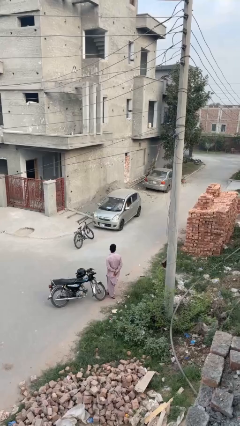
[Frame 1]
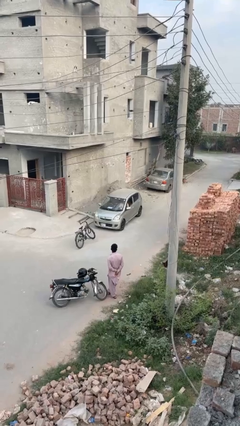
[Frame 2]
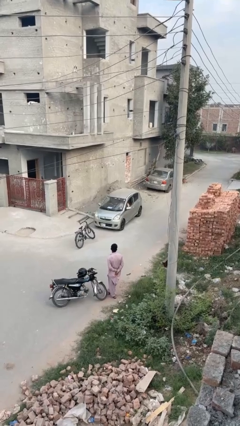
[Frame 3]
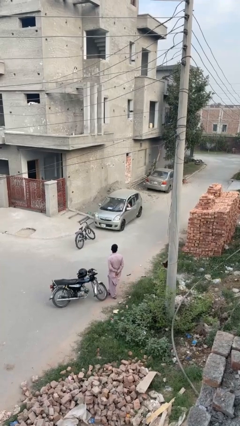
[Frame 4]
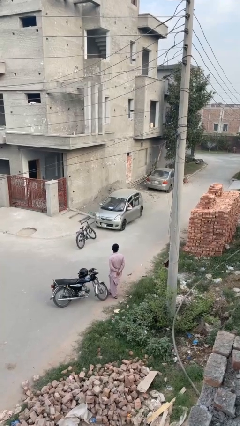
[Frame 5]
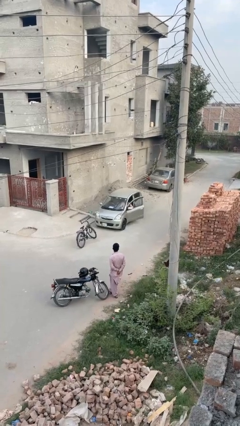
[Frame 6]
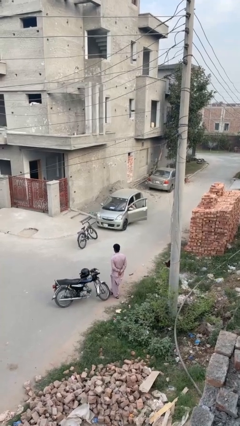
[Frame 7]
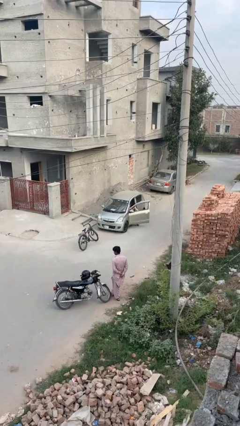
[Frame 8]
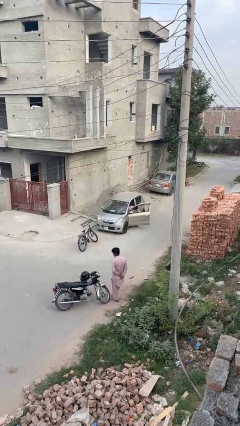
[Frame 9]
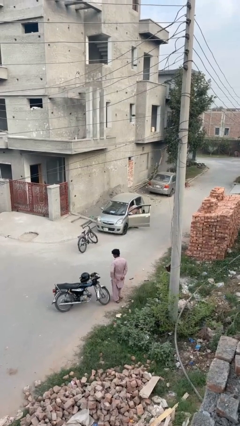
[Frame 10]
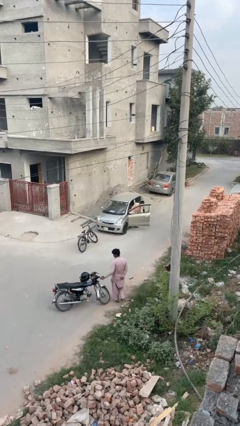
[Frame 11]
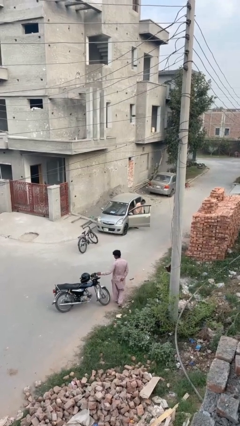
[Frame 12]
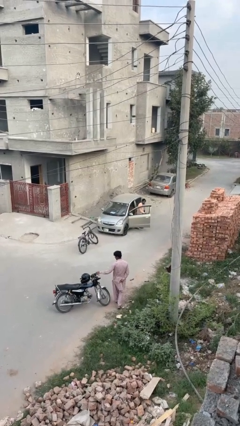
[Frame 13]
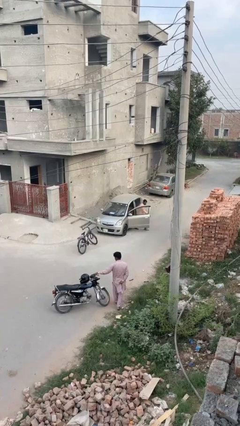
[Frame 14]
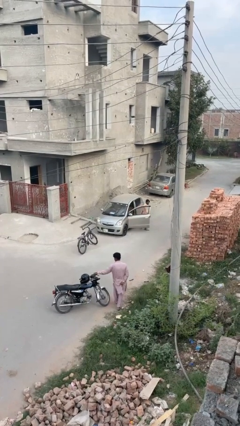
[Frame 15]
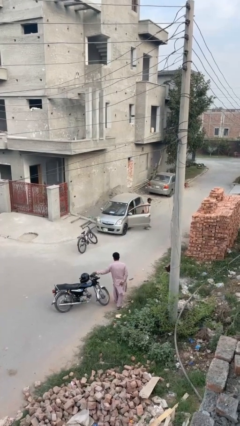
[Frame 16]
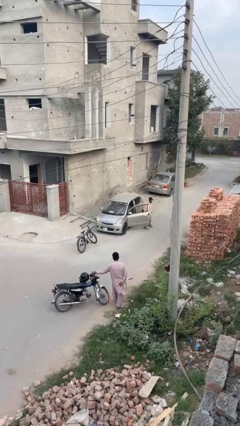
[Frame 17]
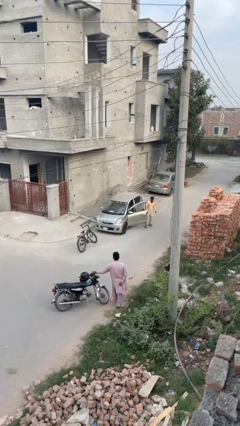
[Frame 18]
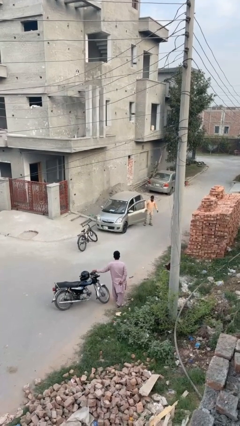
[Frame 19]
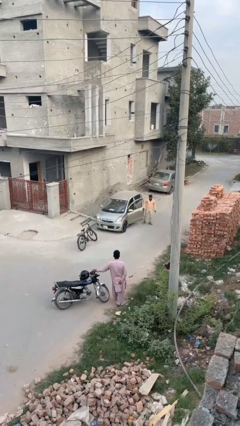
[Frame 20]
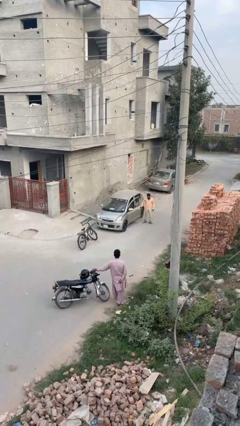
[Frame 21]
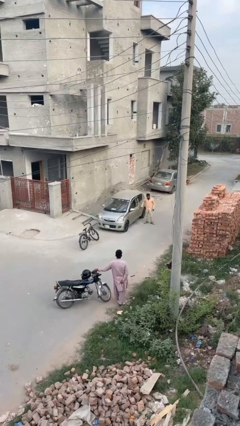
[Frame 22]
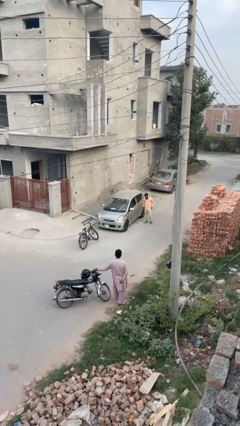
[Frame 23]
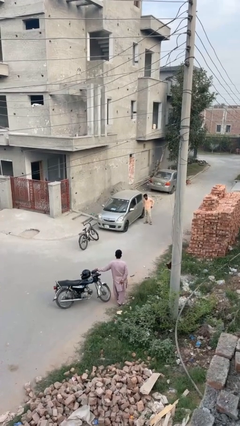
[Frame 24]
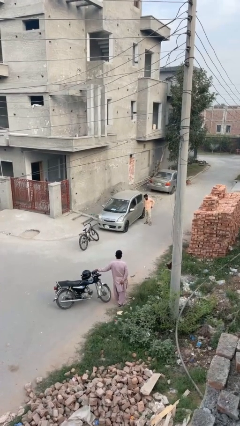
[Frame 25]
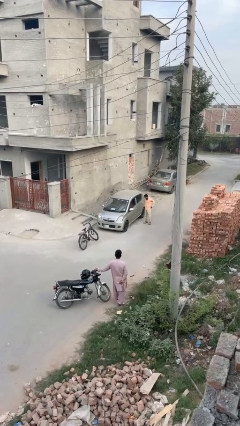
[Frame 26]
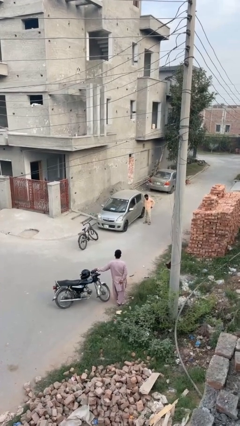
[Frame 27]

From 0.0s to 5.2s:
car drops off person

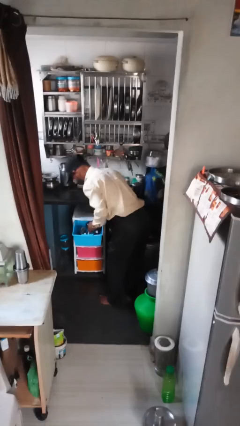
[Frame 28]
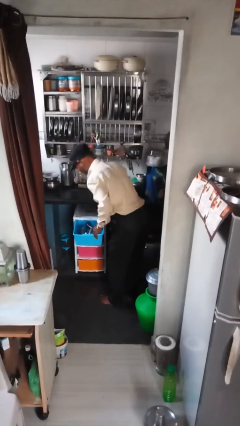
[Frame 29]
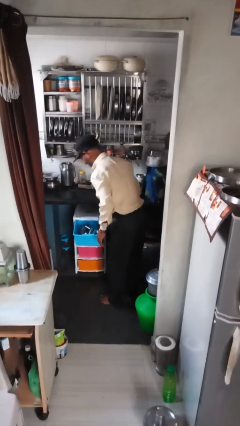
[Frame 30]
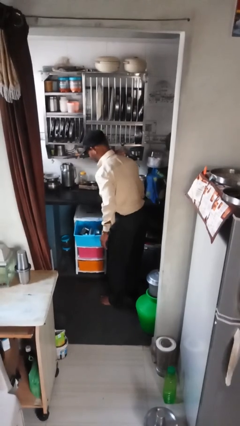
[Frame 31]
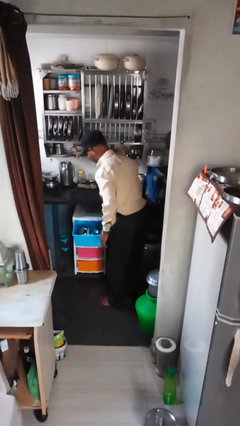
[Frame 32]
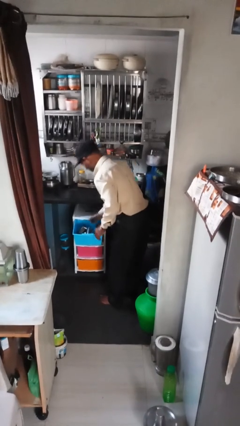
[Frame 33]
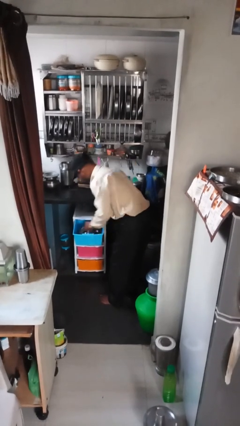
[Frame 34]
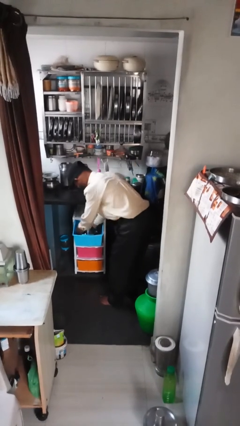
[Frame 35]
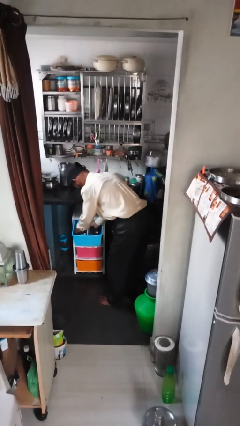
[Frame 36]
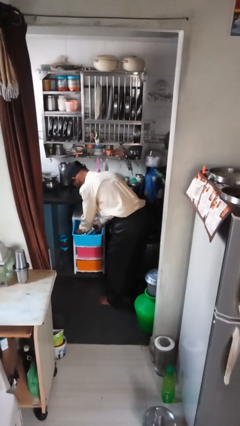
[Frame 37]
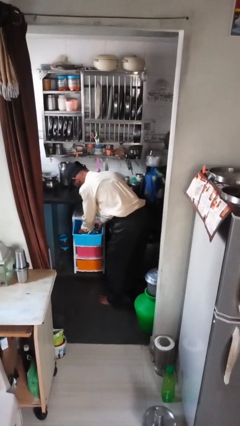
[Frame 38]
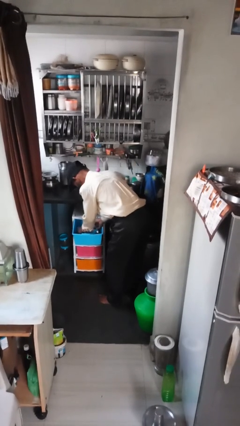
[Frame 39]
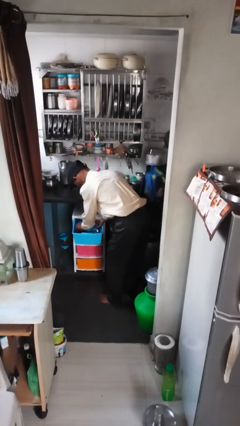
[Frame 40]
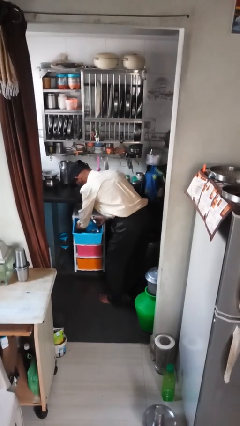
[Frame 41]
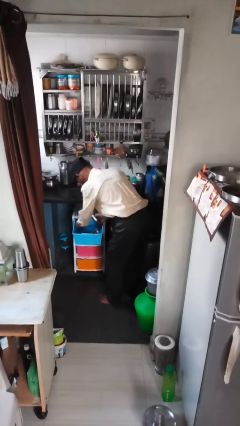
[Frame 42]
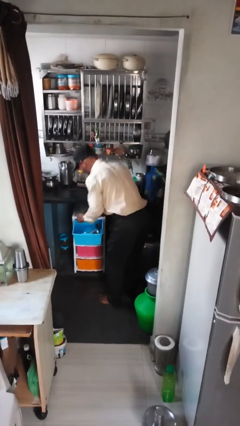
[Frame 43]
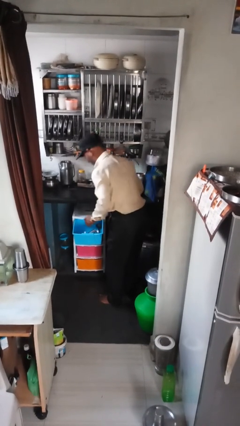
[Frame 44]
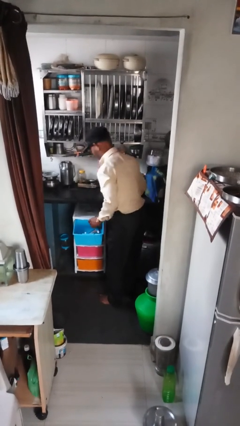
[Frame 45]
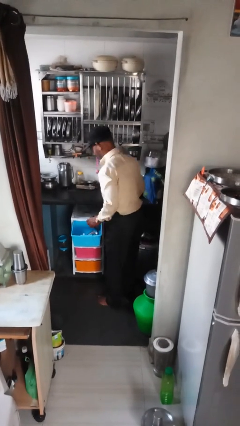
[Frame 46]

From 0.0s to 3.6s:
person takes object from kitchen drawer

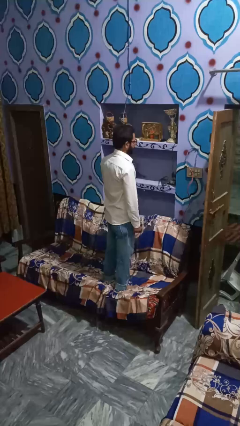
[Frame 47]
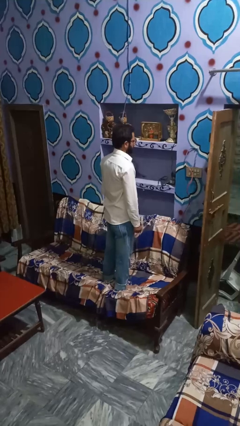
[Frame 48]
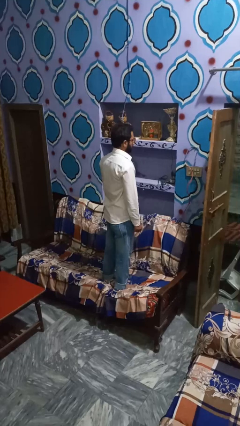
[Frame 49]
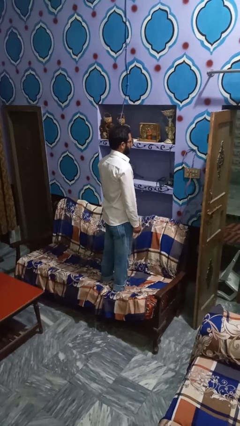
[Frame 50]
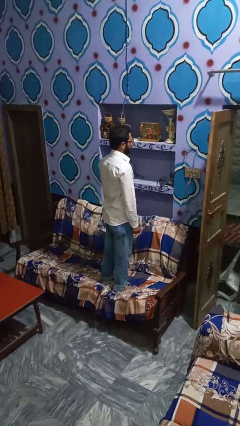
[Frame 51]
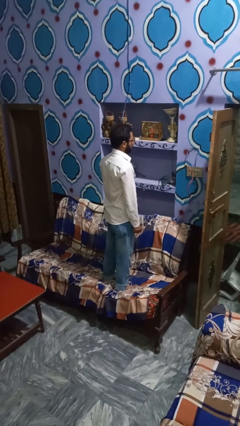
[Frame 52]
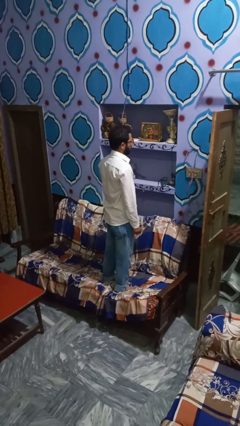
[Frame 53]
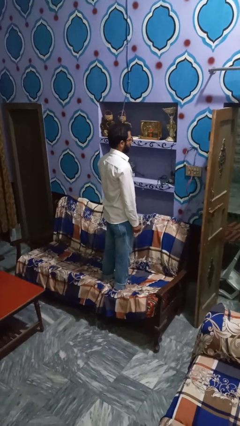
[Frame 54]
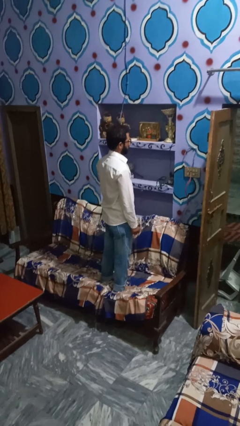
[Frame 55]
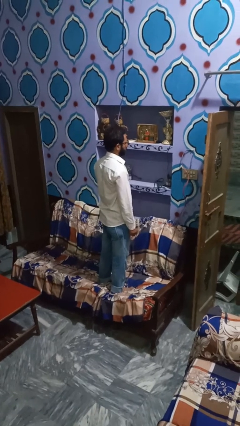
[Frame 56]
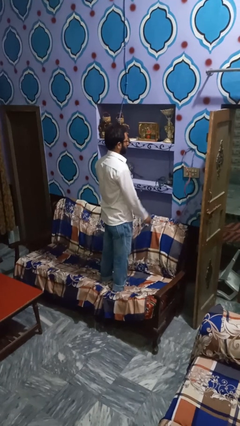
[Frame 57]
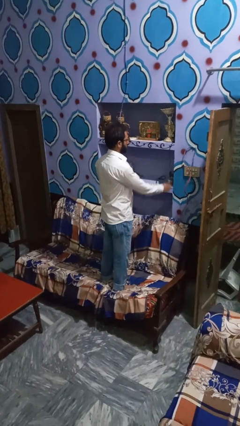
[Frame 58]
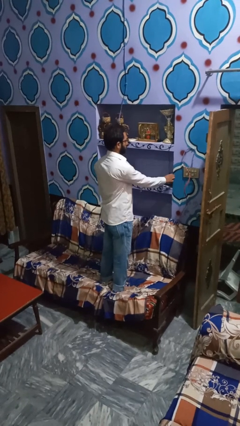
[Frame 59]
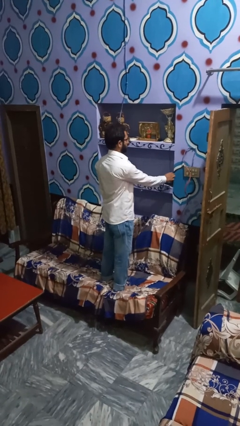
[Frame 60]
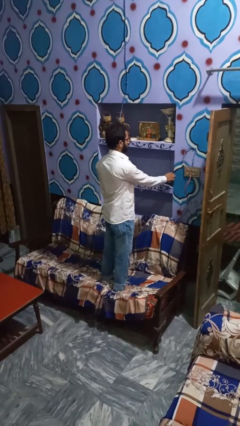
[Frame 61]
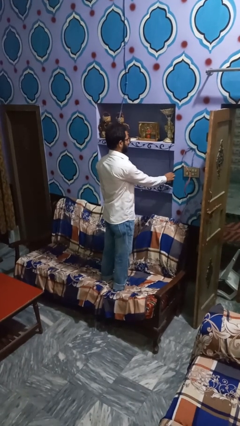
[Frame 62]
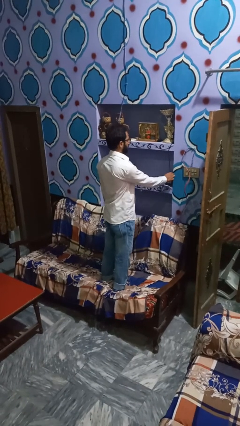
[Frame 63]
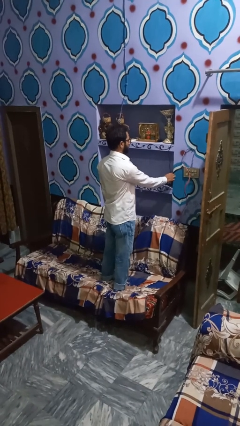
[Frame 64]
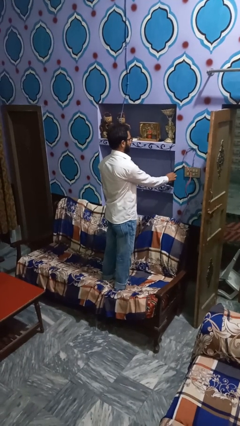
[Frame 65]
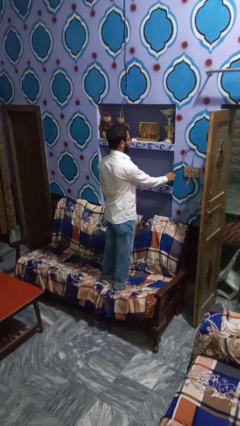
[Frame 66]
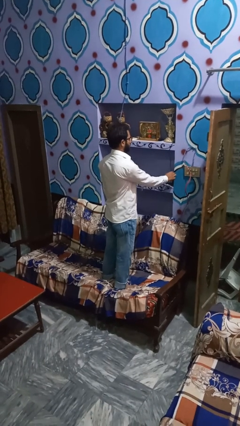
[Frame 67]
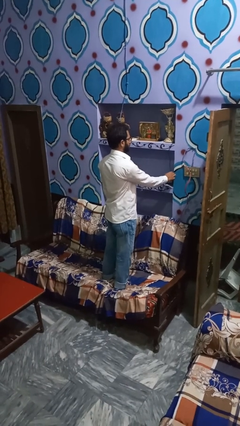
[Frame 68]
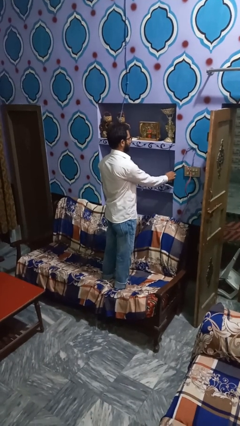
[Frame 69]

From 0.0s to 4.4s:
person turns on lamp

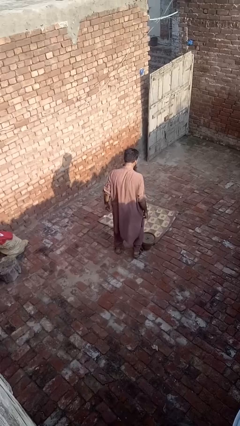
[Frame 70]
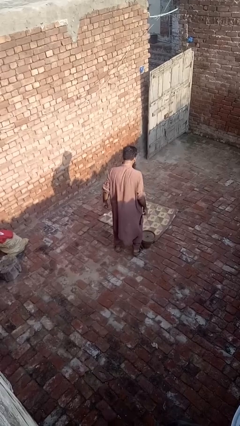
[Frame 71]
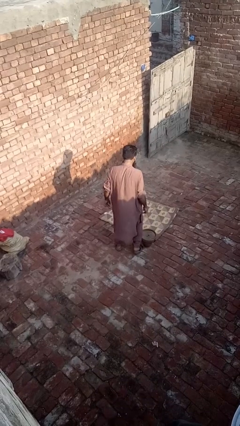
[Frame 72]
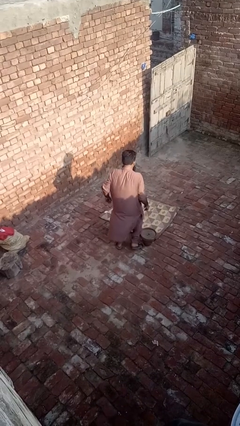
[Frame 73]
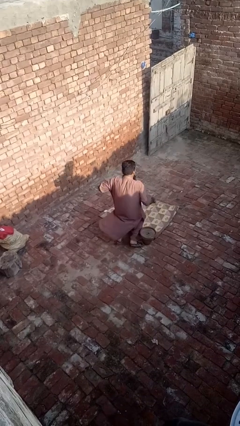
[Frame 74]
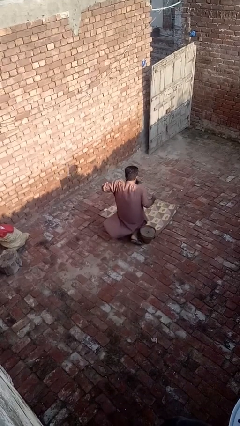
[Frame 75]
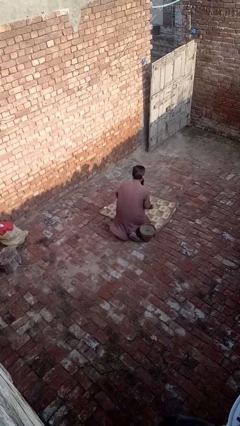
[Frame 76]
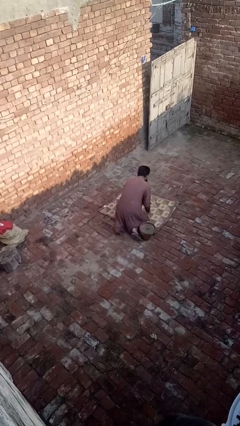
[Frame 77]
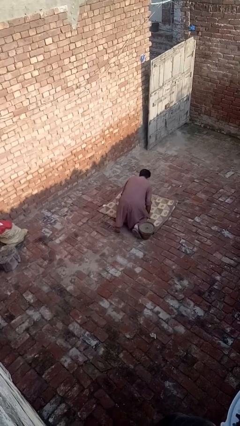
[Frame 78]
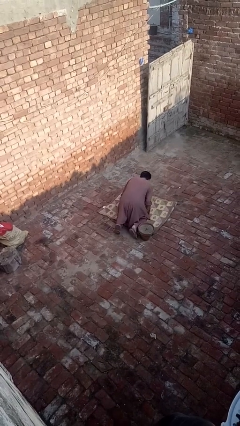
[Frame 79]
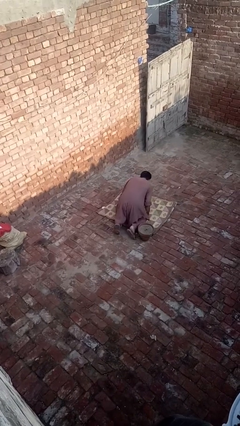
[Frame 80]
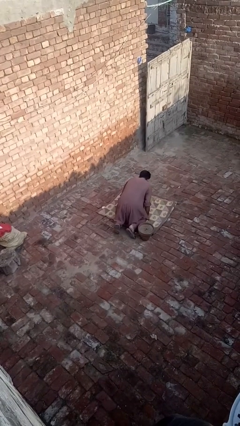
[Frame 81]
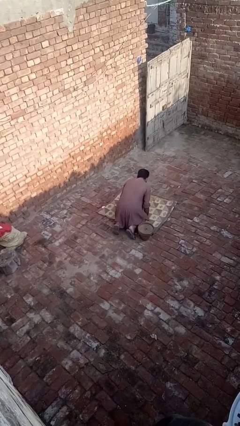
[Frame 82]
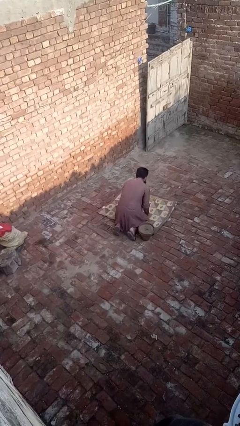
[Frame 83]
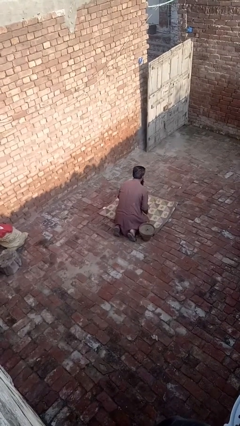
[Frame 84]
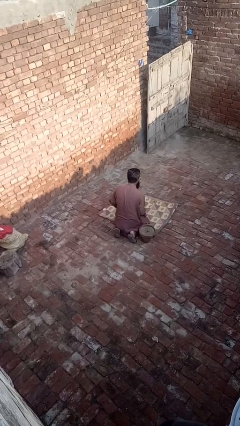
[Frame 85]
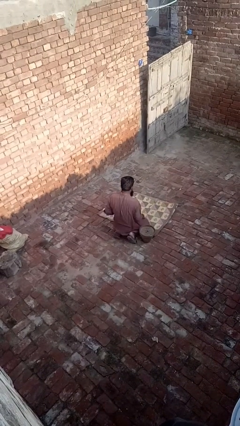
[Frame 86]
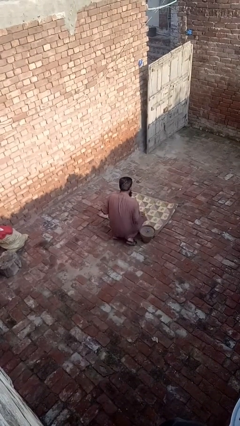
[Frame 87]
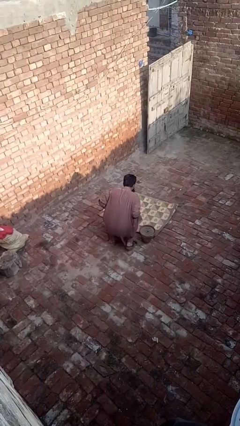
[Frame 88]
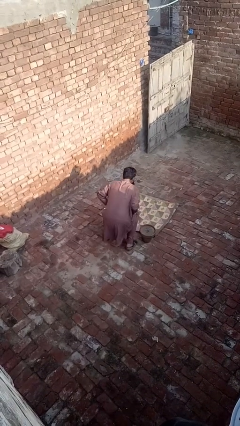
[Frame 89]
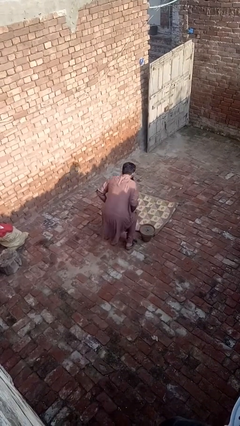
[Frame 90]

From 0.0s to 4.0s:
person lies down on floor

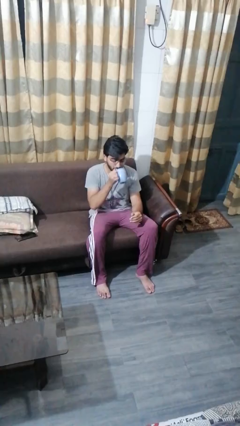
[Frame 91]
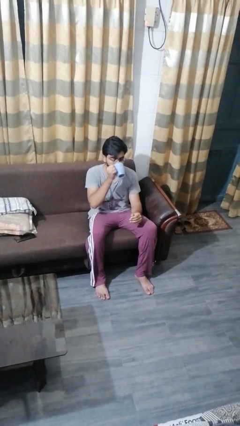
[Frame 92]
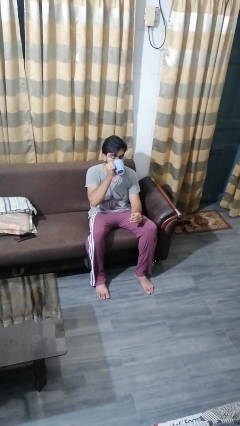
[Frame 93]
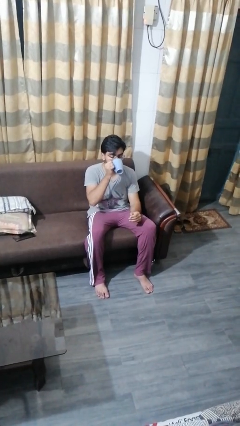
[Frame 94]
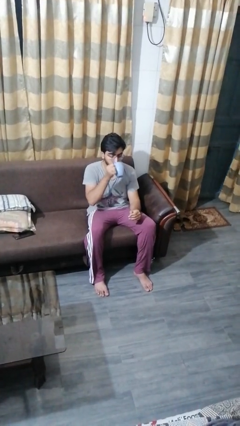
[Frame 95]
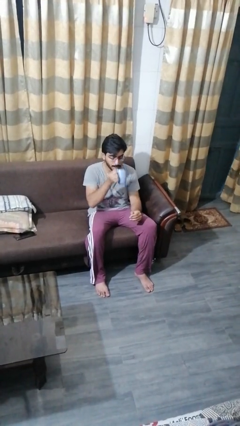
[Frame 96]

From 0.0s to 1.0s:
person drinks from mug
